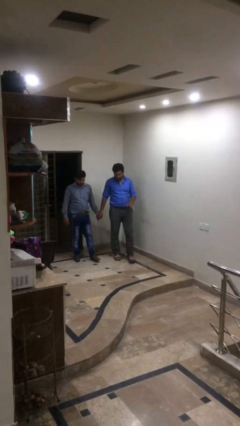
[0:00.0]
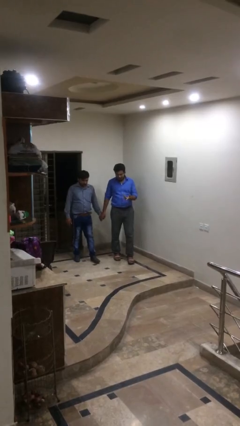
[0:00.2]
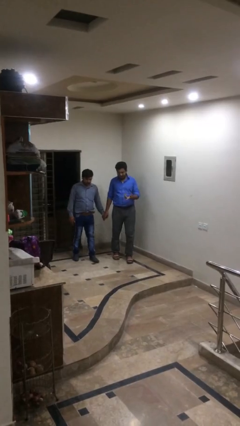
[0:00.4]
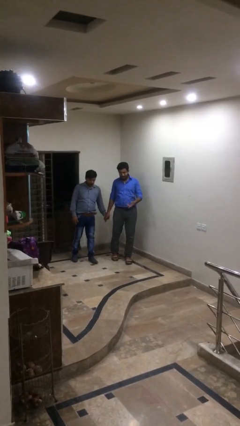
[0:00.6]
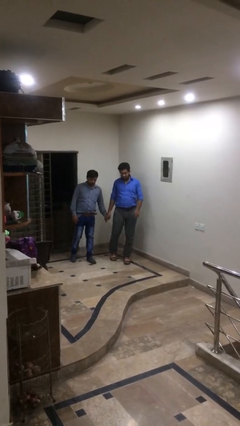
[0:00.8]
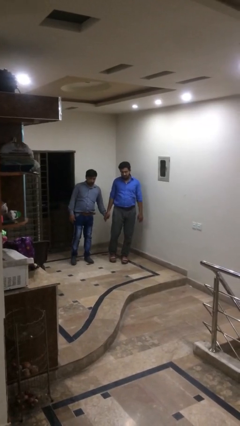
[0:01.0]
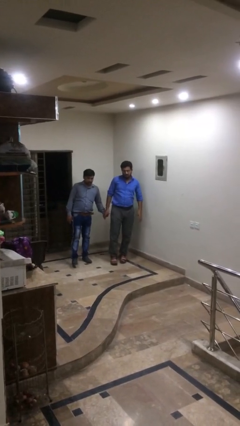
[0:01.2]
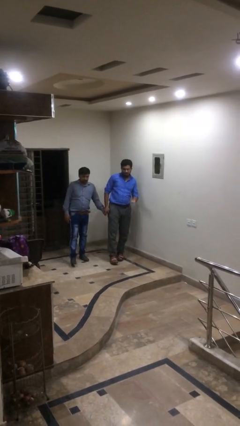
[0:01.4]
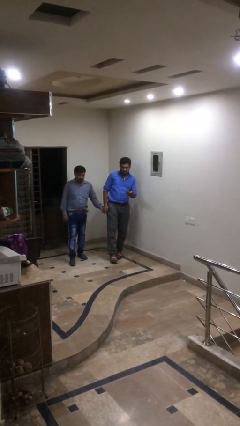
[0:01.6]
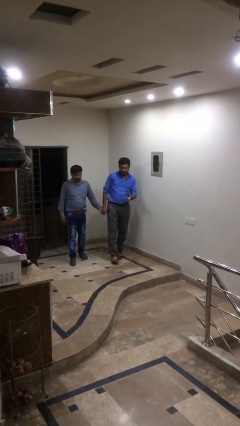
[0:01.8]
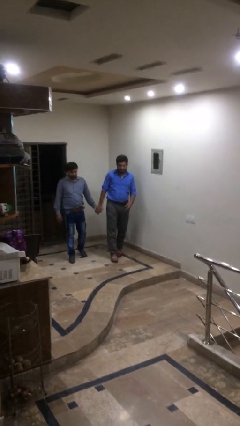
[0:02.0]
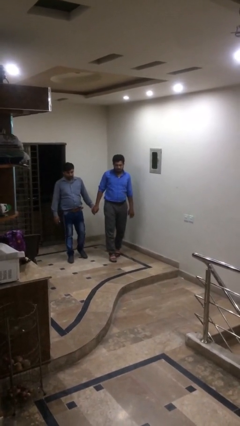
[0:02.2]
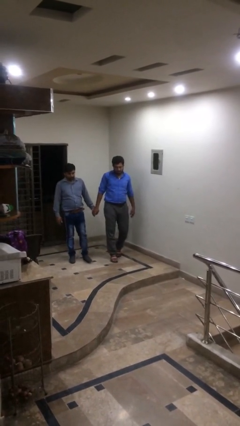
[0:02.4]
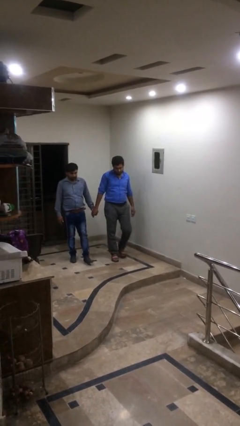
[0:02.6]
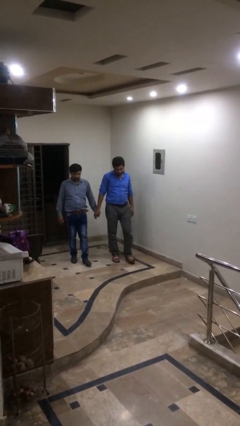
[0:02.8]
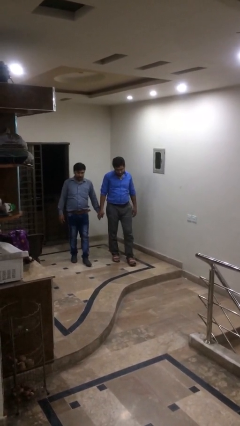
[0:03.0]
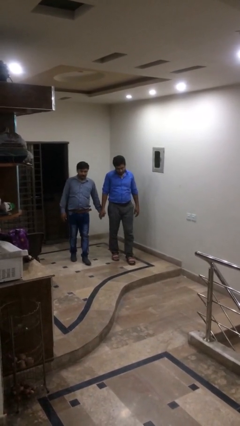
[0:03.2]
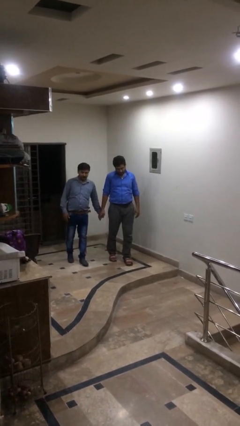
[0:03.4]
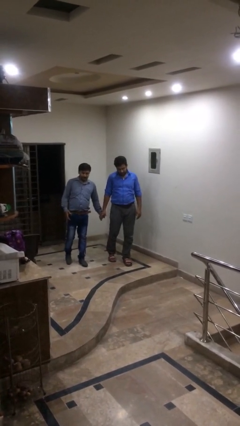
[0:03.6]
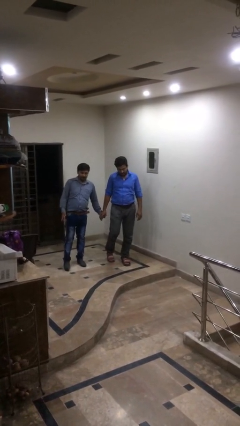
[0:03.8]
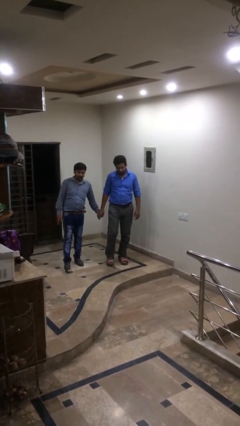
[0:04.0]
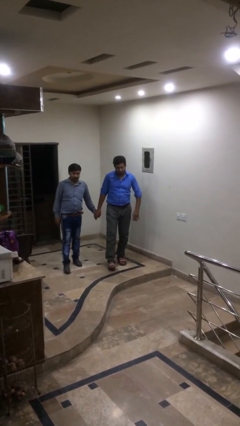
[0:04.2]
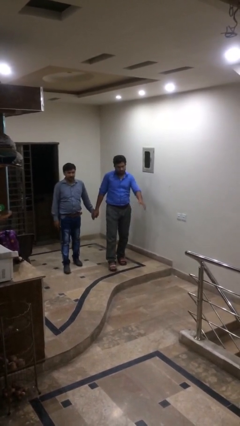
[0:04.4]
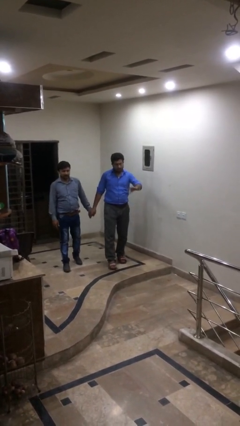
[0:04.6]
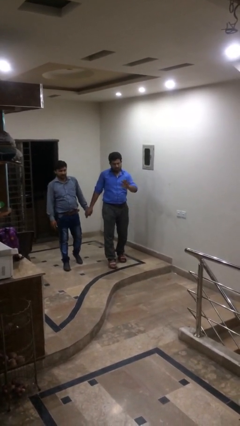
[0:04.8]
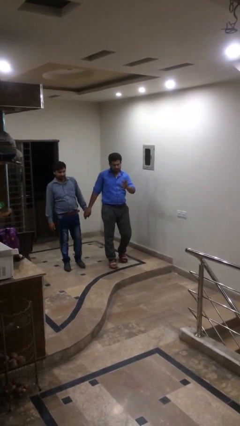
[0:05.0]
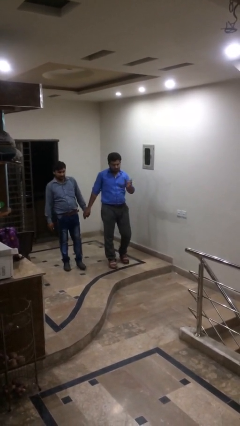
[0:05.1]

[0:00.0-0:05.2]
person holds hand

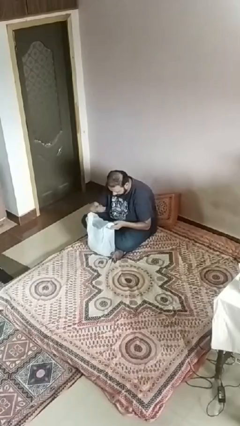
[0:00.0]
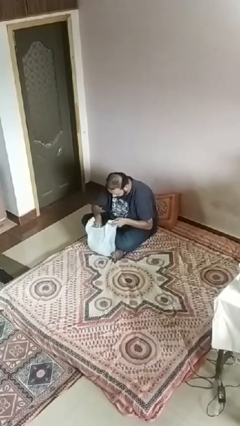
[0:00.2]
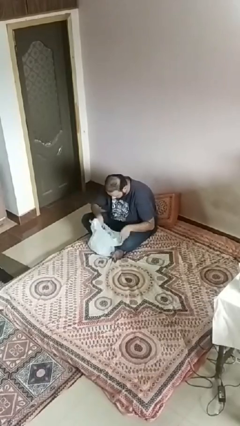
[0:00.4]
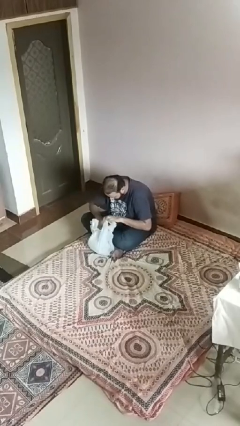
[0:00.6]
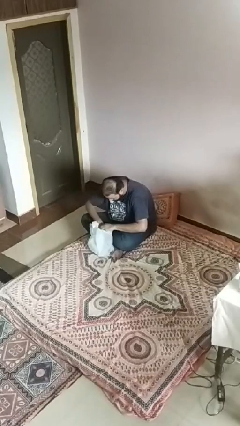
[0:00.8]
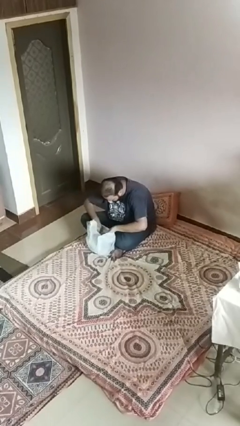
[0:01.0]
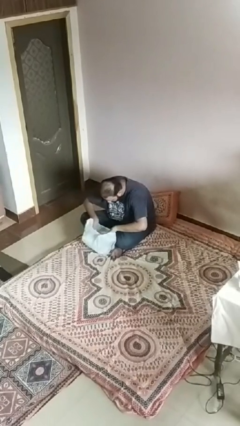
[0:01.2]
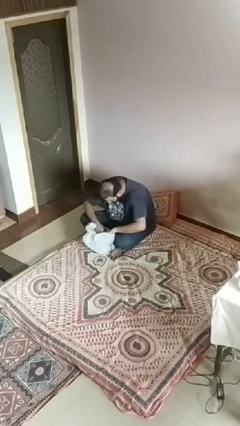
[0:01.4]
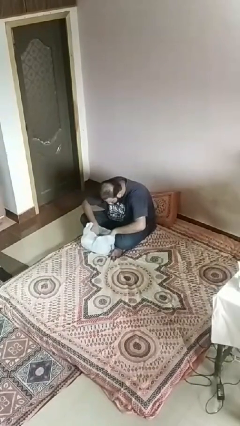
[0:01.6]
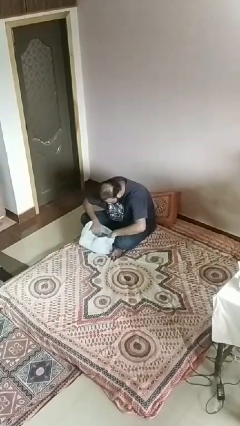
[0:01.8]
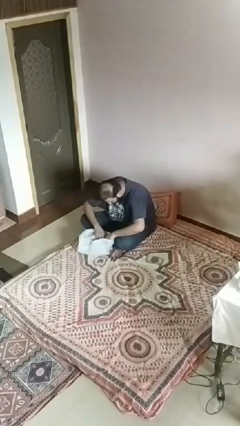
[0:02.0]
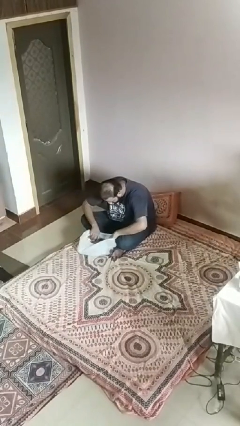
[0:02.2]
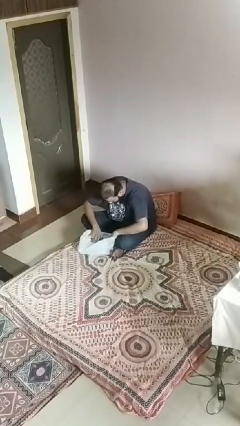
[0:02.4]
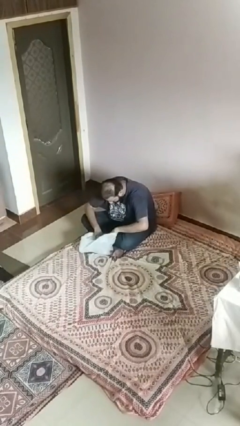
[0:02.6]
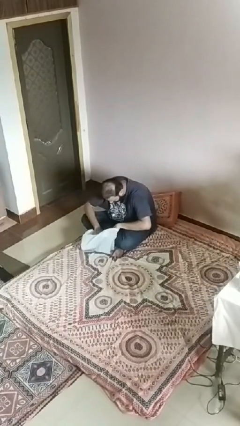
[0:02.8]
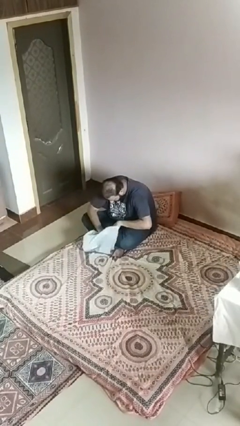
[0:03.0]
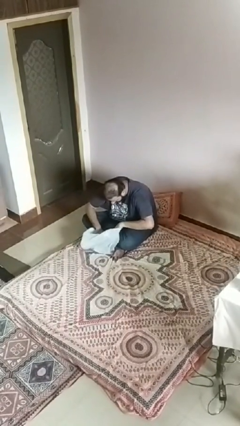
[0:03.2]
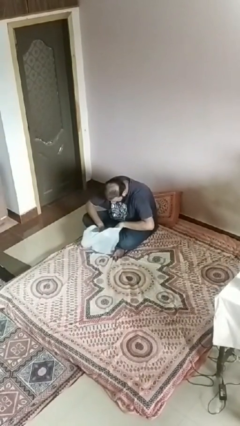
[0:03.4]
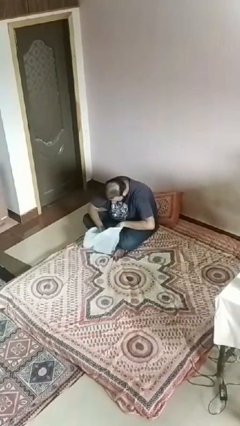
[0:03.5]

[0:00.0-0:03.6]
person searches in bag

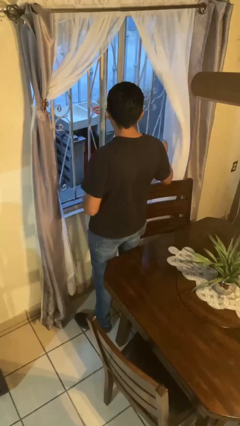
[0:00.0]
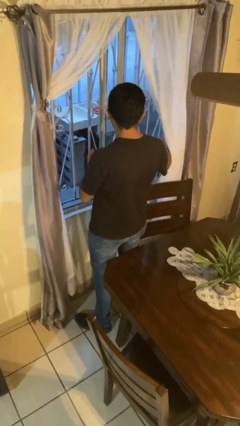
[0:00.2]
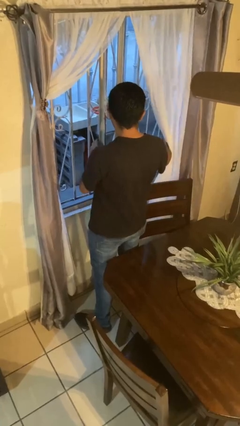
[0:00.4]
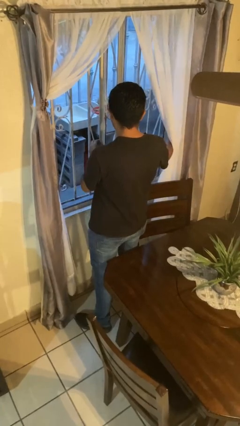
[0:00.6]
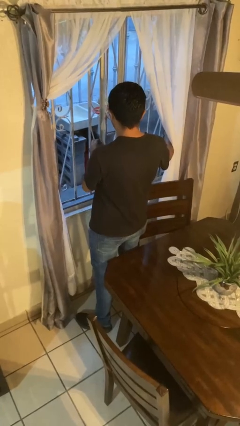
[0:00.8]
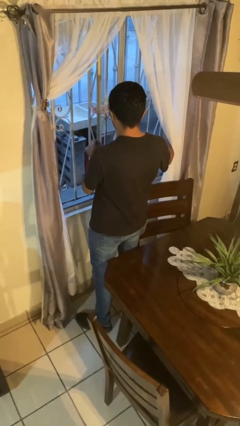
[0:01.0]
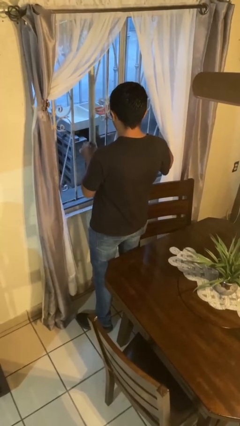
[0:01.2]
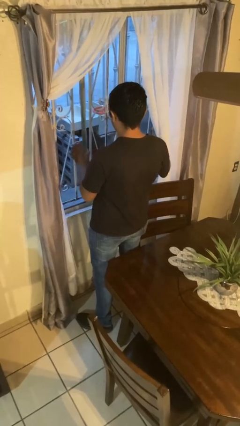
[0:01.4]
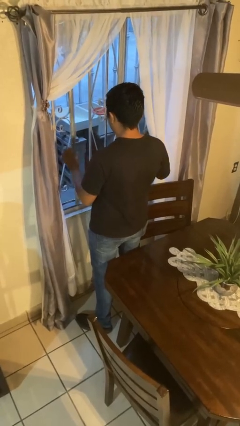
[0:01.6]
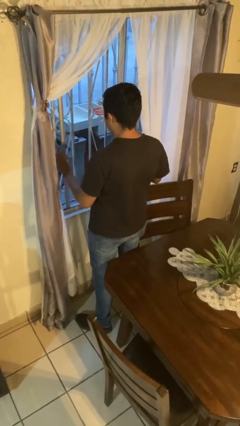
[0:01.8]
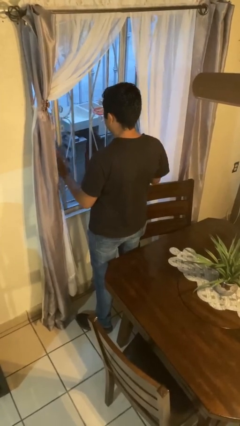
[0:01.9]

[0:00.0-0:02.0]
person closes home window

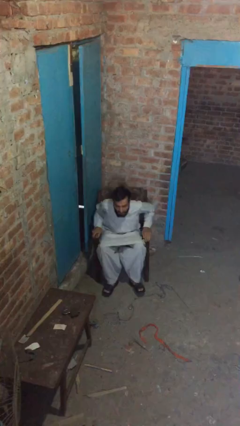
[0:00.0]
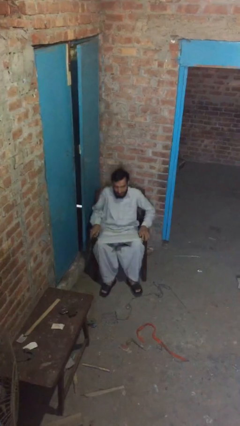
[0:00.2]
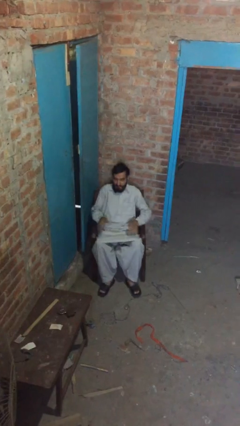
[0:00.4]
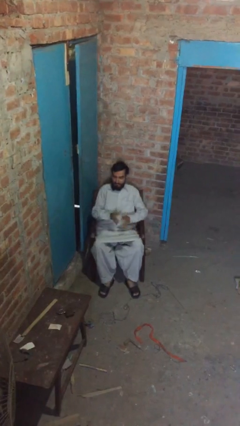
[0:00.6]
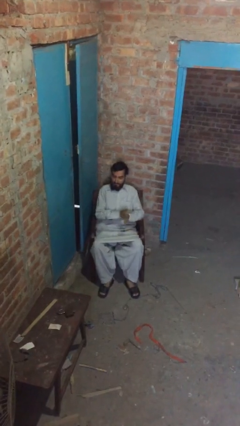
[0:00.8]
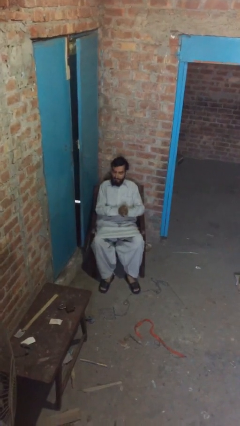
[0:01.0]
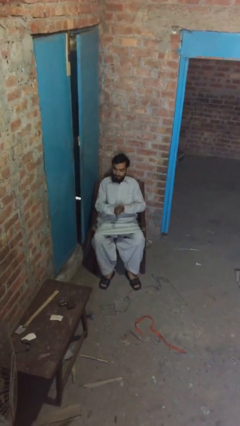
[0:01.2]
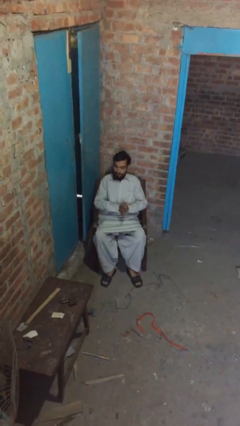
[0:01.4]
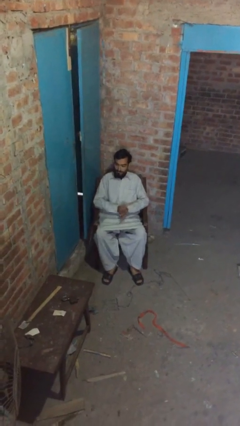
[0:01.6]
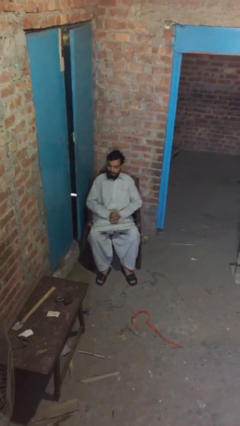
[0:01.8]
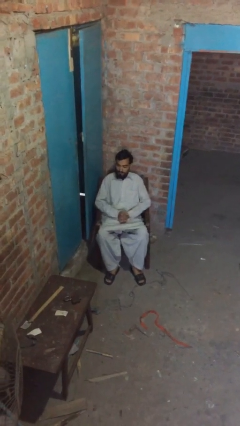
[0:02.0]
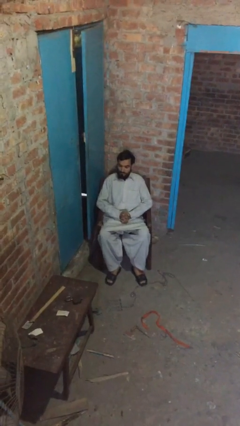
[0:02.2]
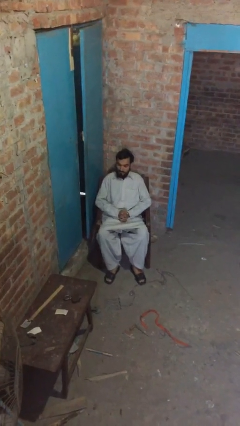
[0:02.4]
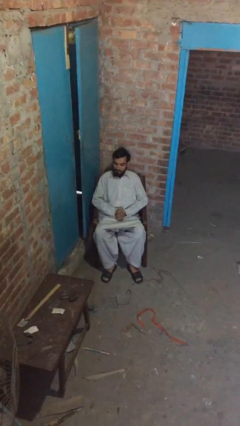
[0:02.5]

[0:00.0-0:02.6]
person sits down

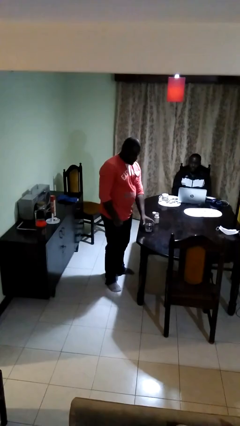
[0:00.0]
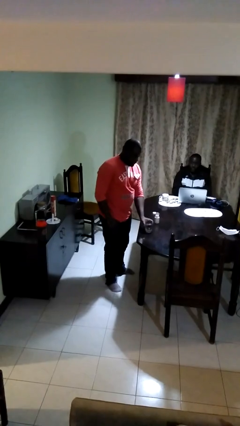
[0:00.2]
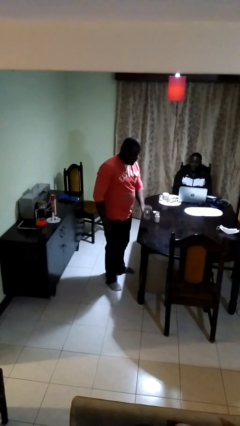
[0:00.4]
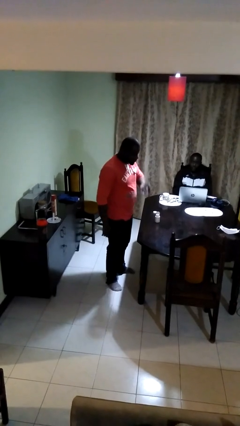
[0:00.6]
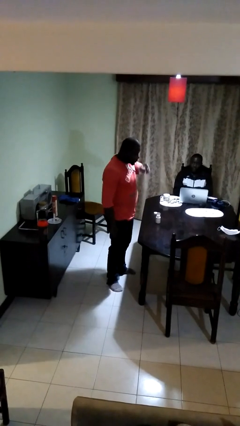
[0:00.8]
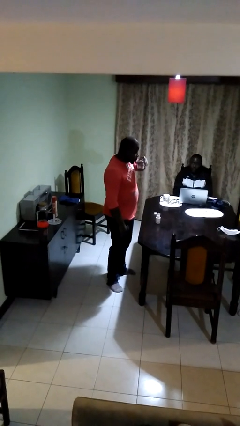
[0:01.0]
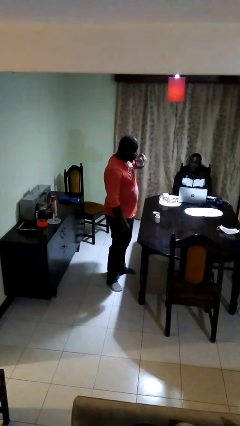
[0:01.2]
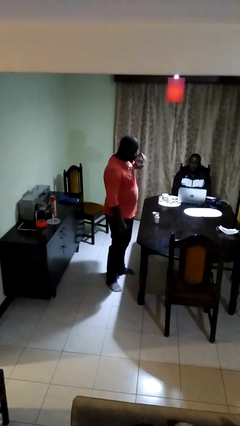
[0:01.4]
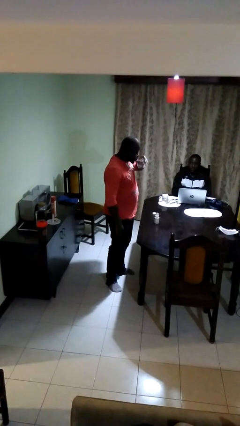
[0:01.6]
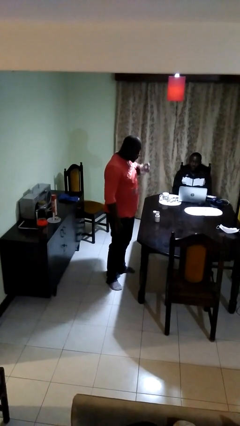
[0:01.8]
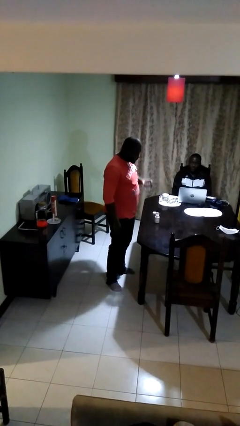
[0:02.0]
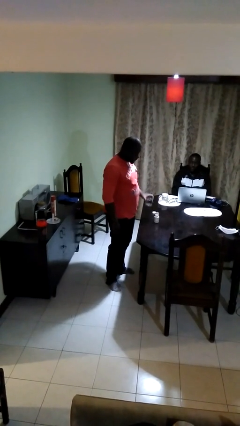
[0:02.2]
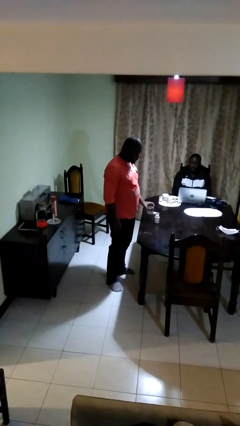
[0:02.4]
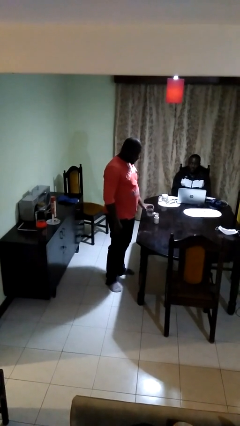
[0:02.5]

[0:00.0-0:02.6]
person drinks from cup

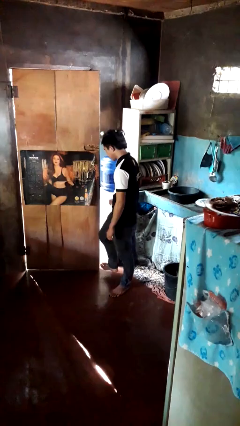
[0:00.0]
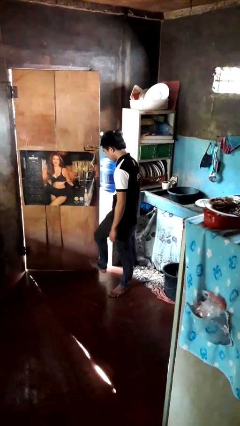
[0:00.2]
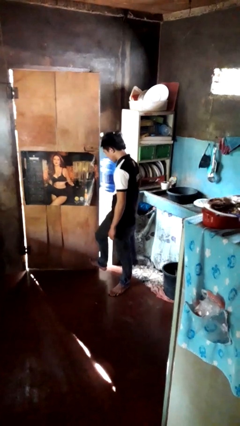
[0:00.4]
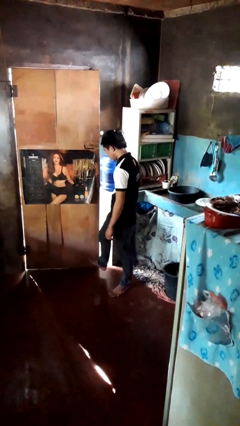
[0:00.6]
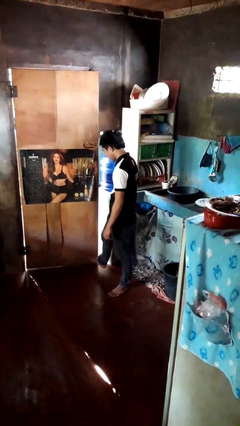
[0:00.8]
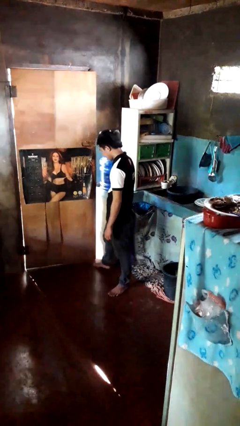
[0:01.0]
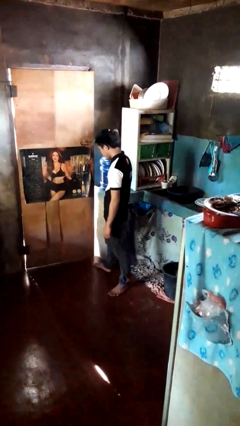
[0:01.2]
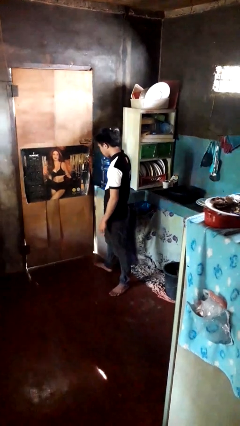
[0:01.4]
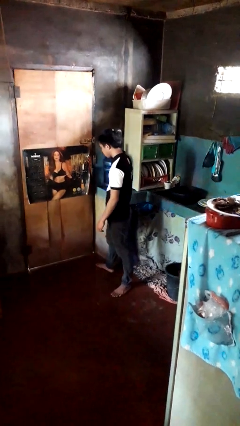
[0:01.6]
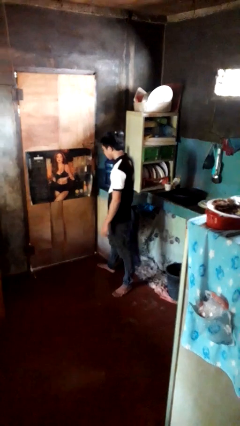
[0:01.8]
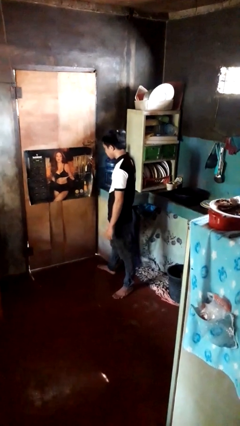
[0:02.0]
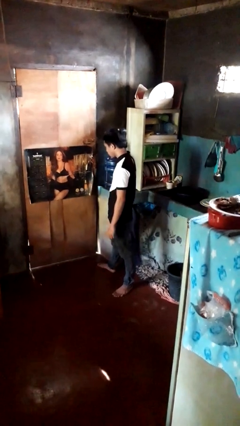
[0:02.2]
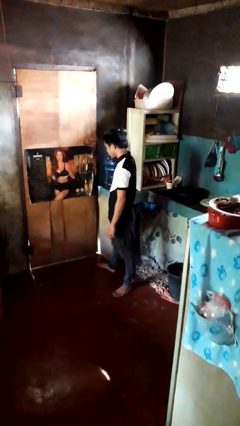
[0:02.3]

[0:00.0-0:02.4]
person closes door with foot
